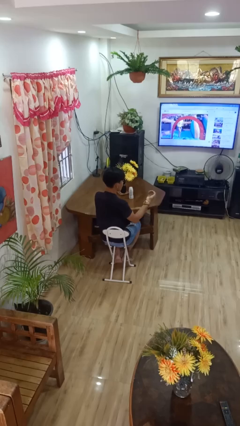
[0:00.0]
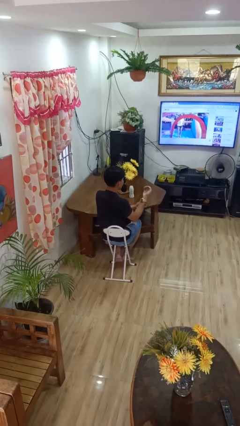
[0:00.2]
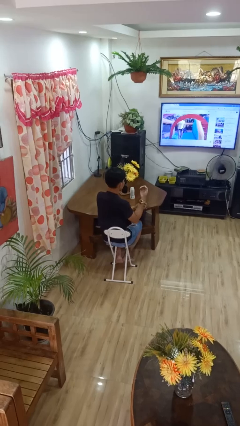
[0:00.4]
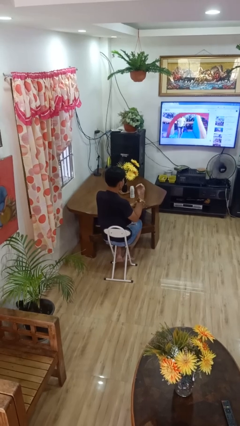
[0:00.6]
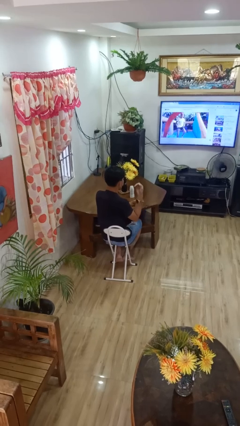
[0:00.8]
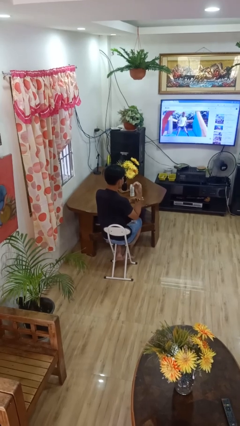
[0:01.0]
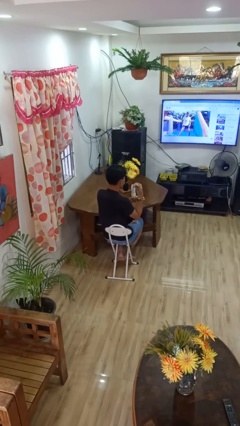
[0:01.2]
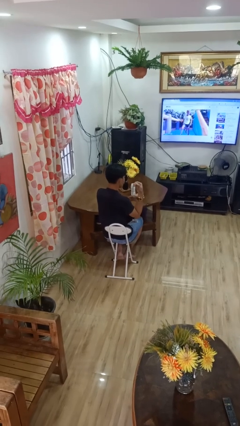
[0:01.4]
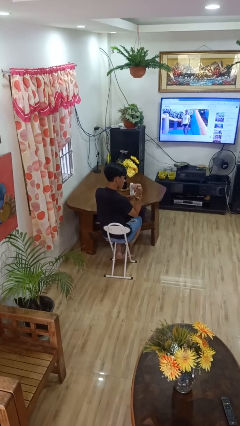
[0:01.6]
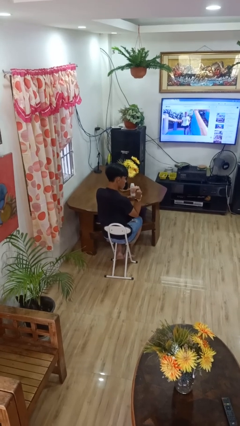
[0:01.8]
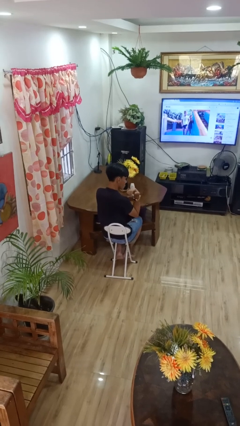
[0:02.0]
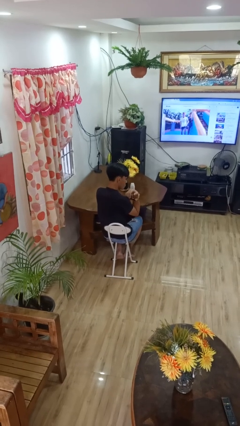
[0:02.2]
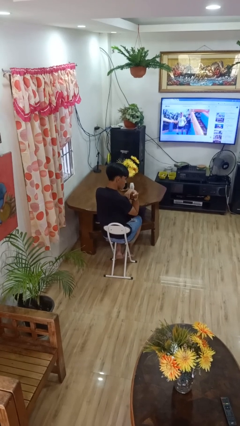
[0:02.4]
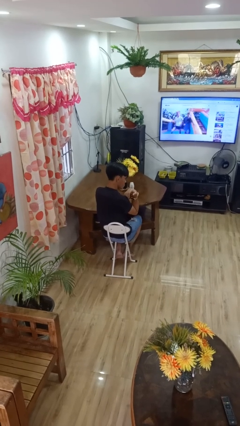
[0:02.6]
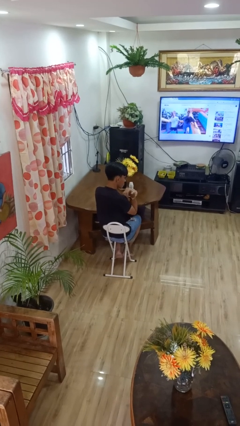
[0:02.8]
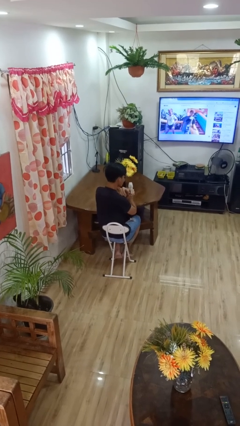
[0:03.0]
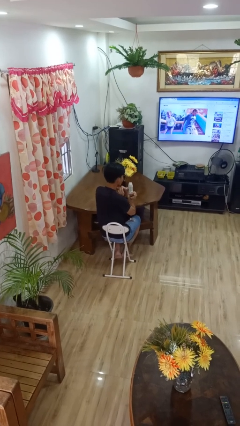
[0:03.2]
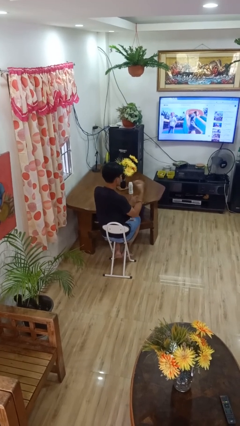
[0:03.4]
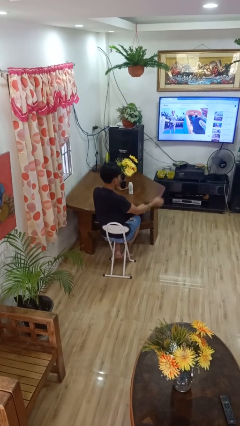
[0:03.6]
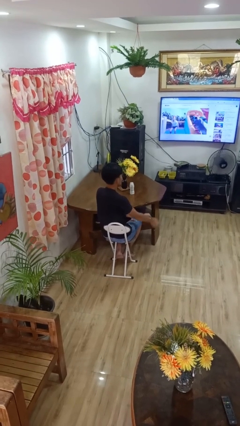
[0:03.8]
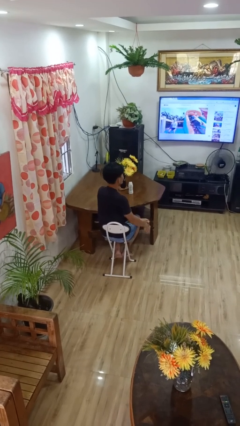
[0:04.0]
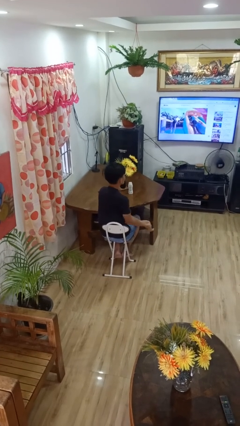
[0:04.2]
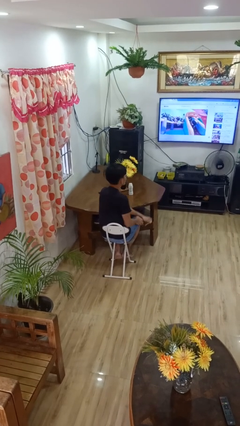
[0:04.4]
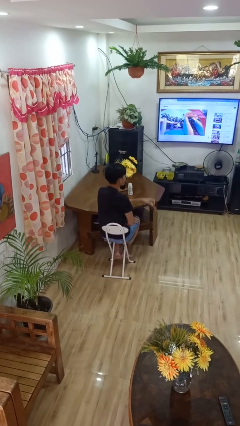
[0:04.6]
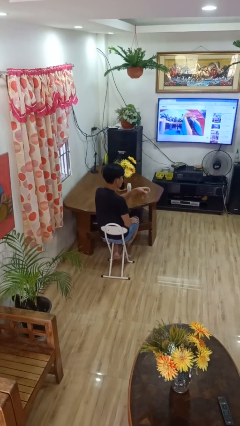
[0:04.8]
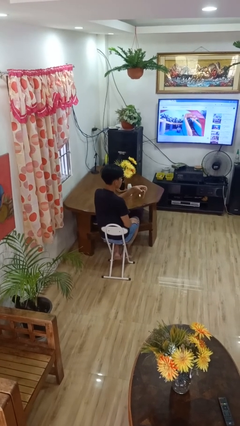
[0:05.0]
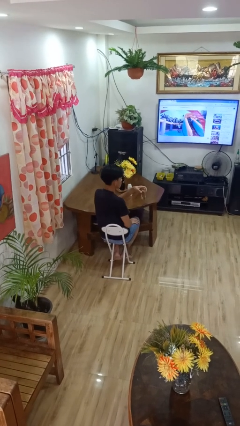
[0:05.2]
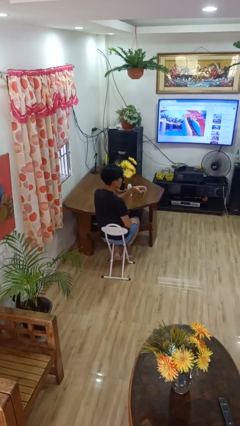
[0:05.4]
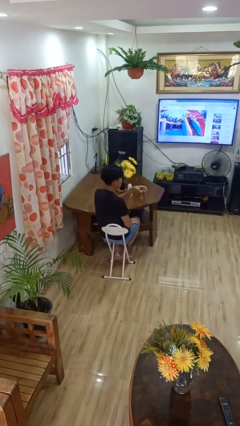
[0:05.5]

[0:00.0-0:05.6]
person takes off wristwatch

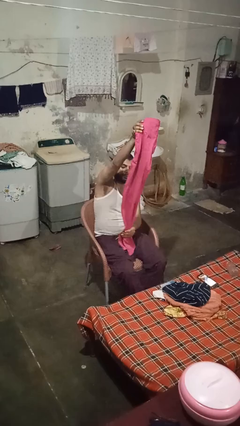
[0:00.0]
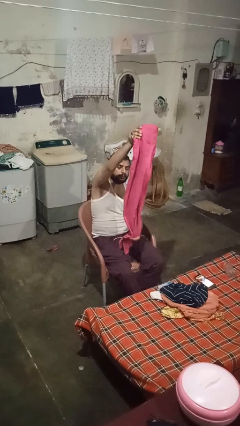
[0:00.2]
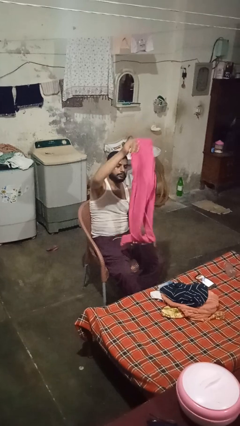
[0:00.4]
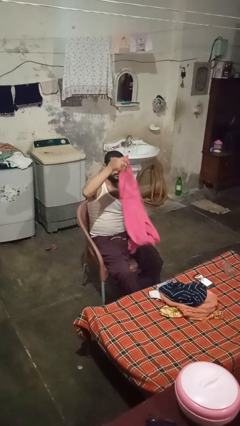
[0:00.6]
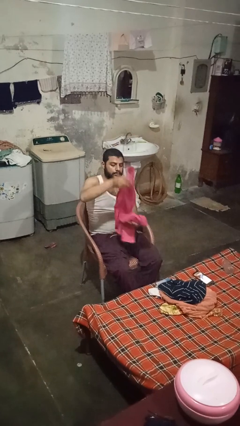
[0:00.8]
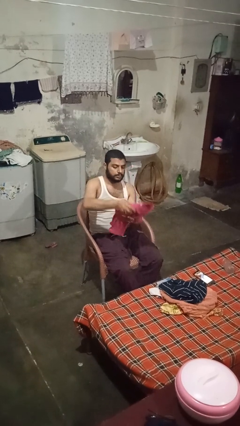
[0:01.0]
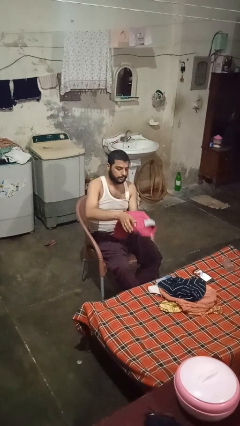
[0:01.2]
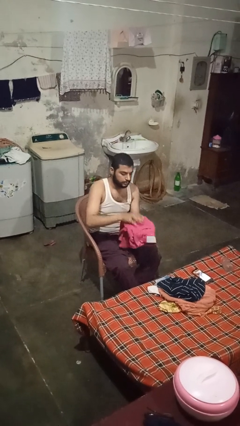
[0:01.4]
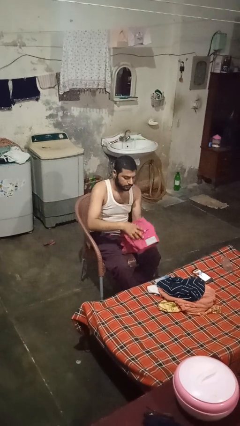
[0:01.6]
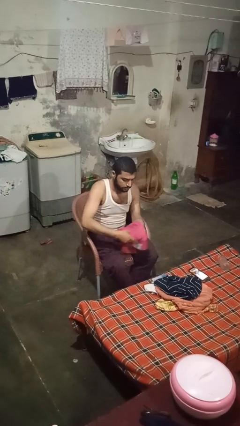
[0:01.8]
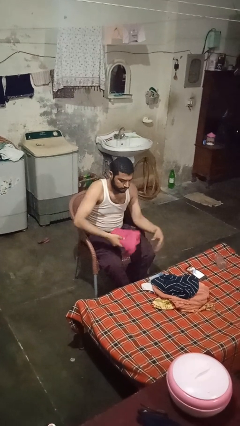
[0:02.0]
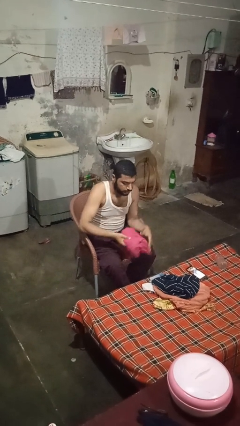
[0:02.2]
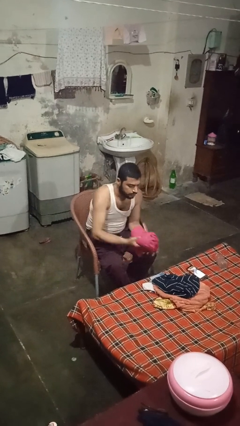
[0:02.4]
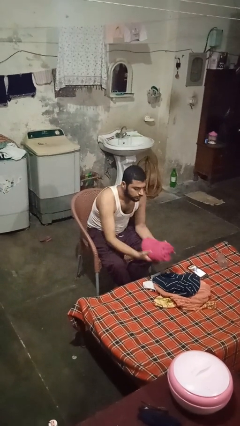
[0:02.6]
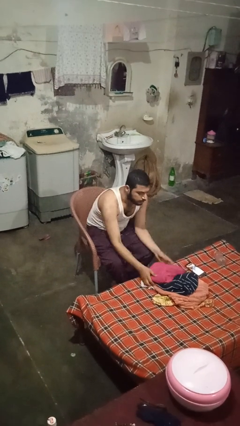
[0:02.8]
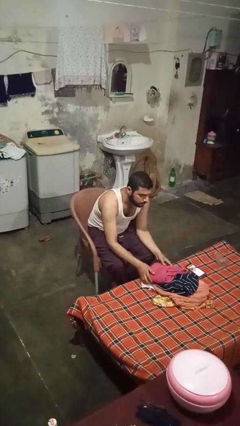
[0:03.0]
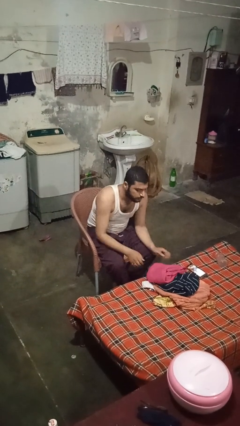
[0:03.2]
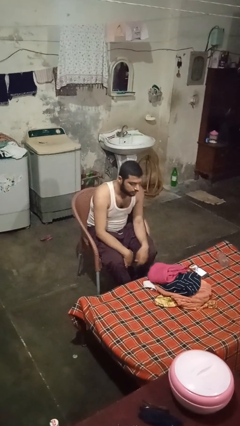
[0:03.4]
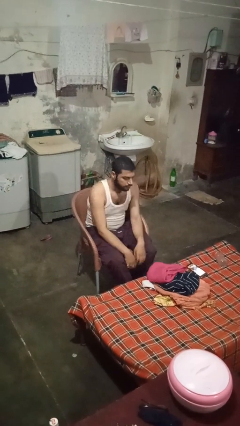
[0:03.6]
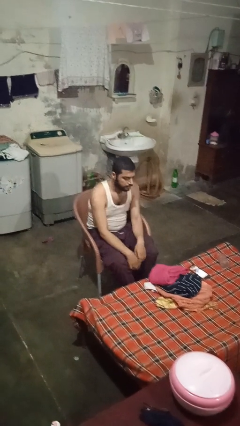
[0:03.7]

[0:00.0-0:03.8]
person folds pants

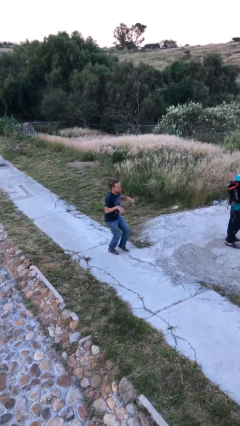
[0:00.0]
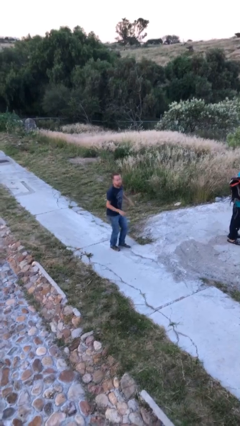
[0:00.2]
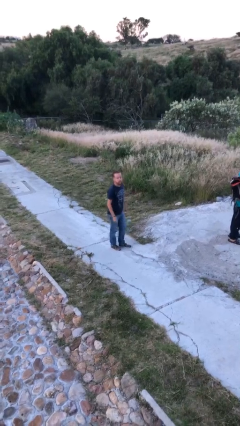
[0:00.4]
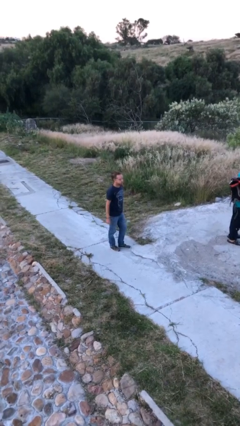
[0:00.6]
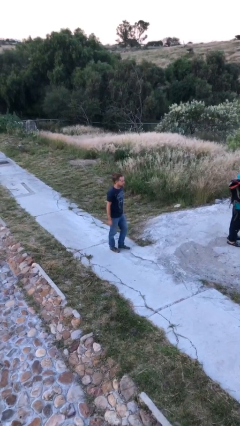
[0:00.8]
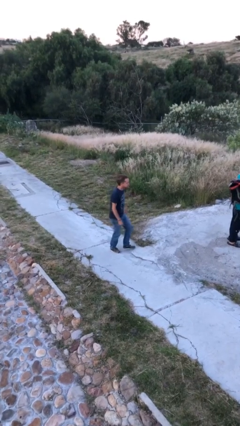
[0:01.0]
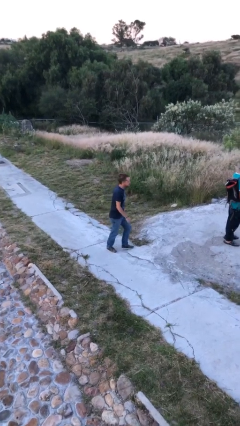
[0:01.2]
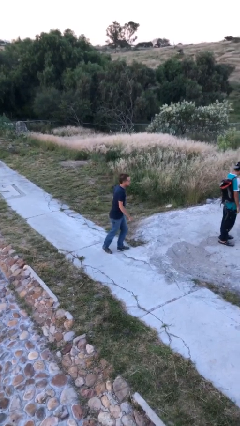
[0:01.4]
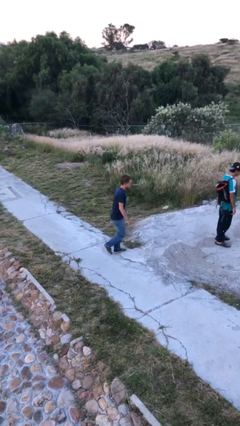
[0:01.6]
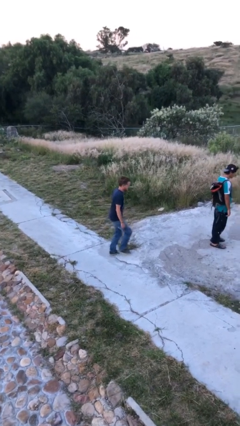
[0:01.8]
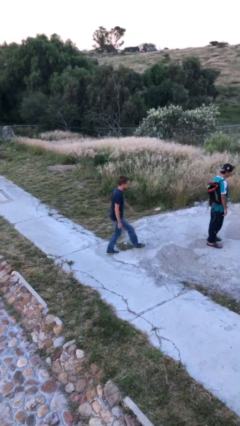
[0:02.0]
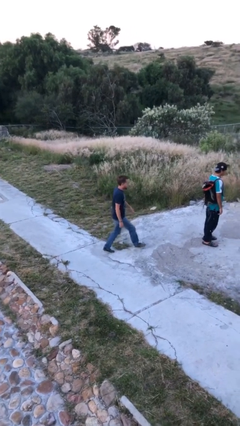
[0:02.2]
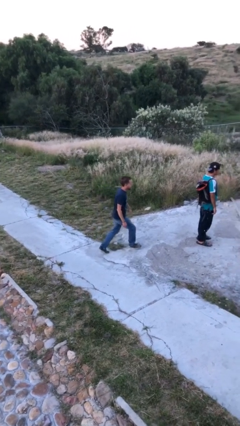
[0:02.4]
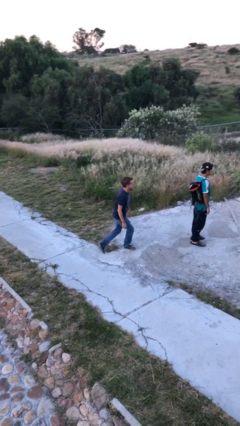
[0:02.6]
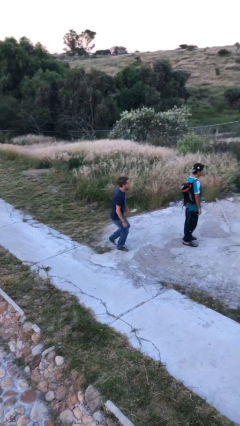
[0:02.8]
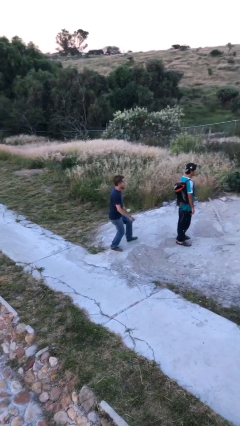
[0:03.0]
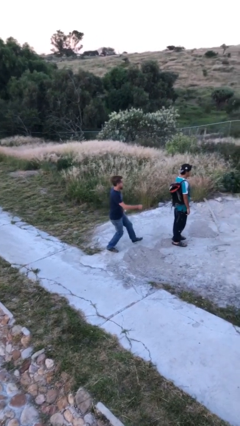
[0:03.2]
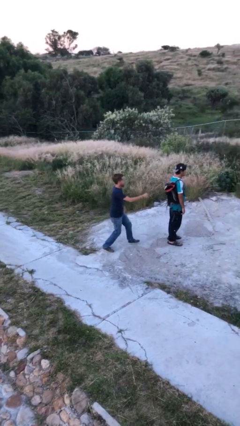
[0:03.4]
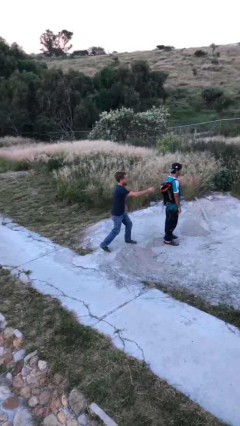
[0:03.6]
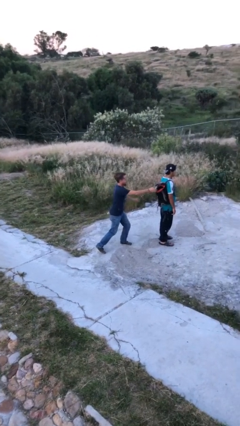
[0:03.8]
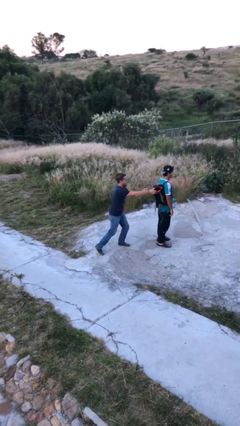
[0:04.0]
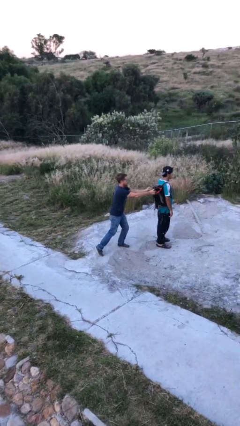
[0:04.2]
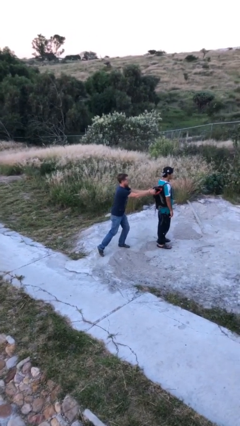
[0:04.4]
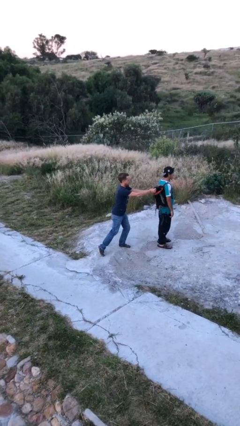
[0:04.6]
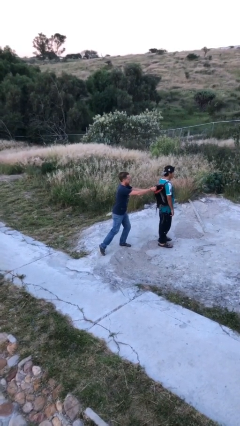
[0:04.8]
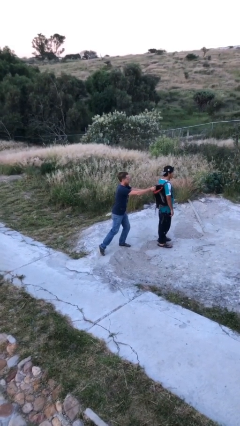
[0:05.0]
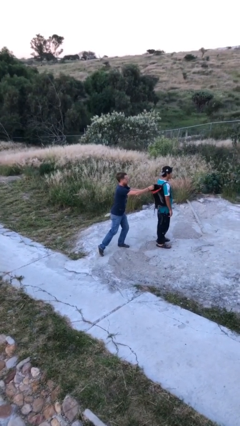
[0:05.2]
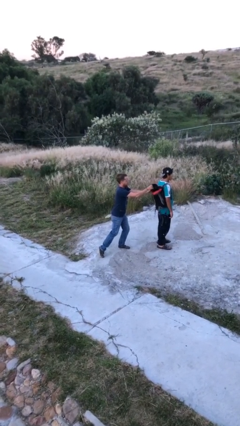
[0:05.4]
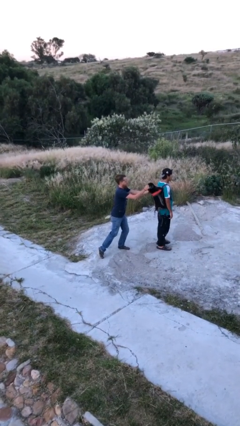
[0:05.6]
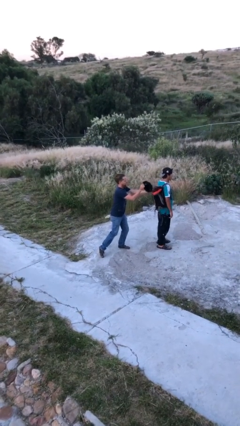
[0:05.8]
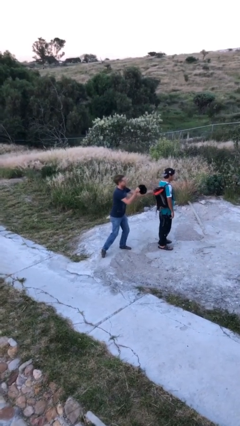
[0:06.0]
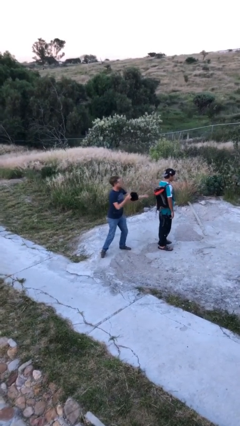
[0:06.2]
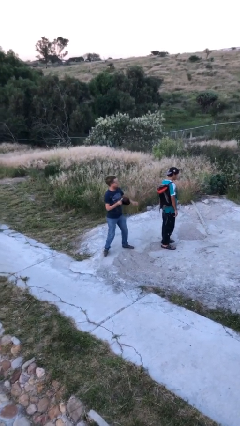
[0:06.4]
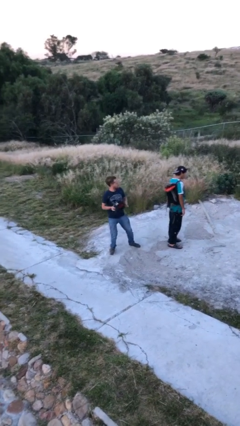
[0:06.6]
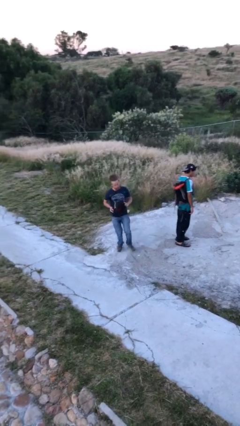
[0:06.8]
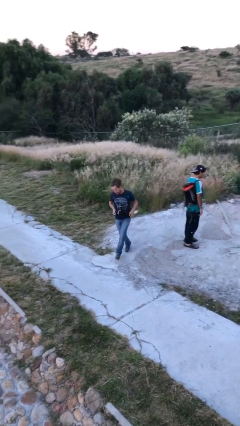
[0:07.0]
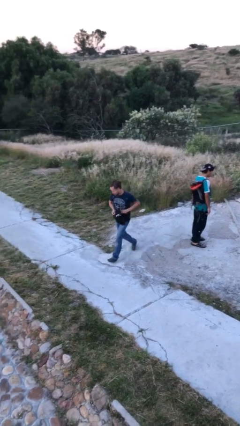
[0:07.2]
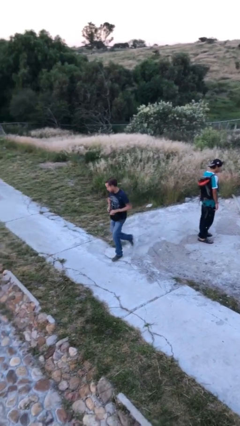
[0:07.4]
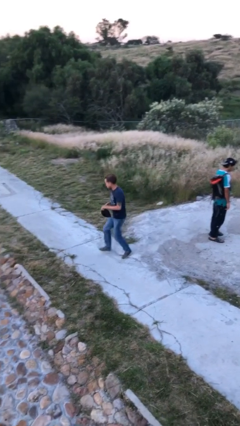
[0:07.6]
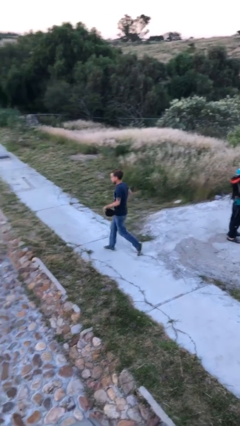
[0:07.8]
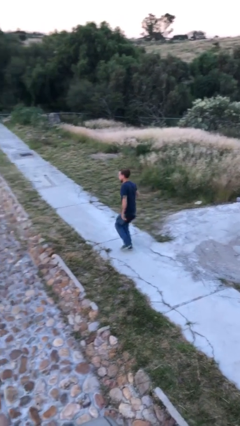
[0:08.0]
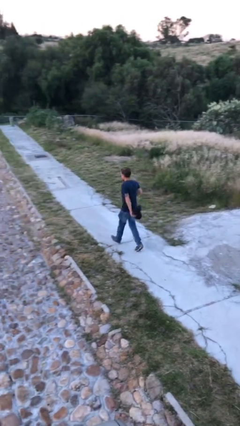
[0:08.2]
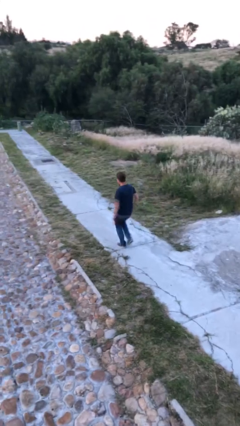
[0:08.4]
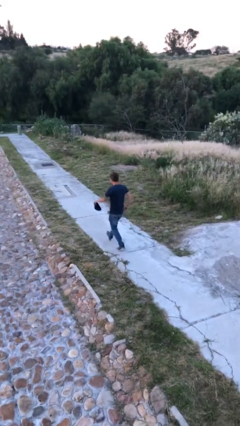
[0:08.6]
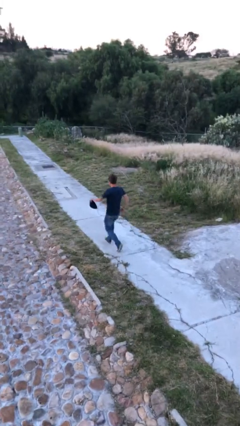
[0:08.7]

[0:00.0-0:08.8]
person steals object from person
